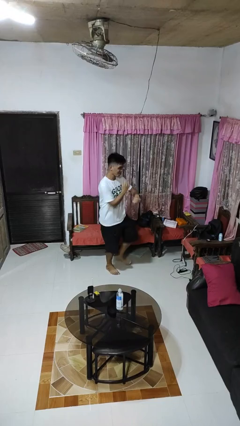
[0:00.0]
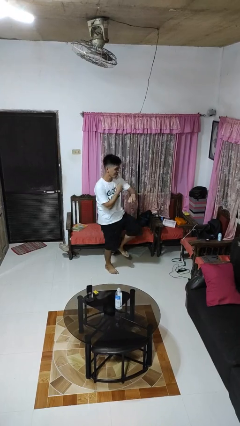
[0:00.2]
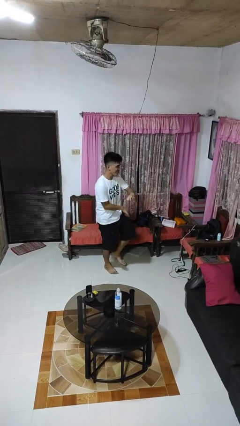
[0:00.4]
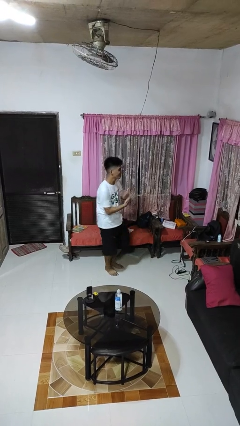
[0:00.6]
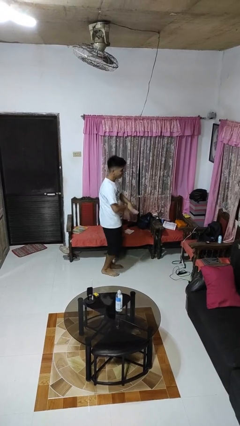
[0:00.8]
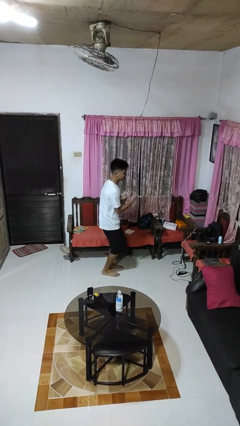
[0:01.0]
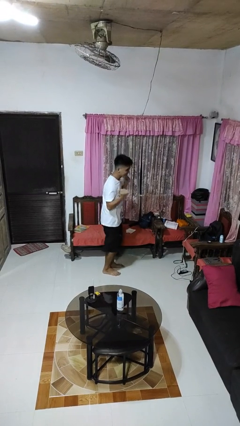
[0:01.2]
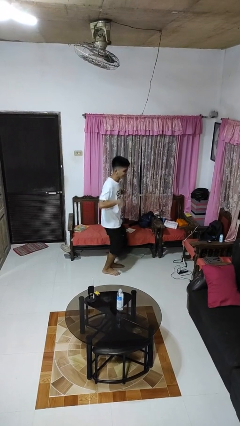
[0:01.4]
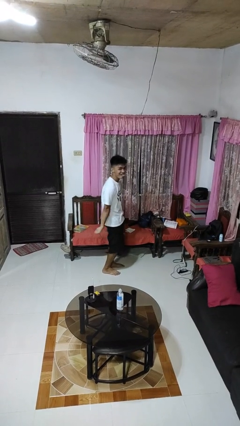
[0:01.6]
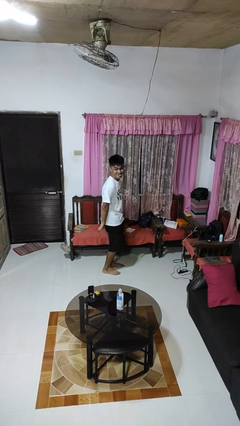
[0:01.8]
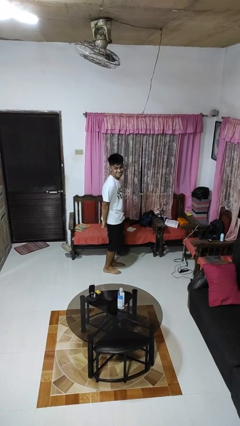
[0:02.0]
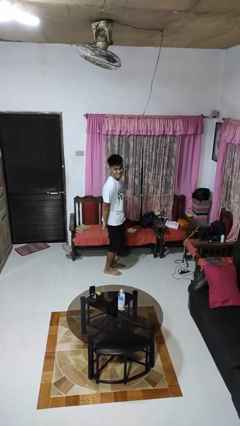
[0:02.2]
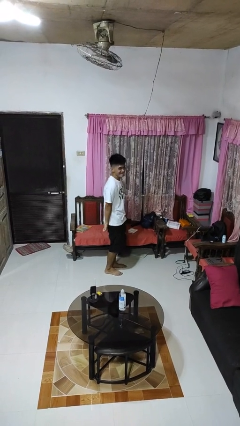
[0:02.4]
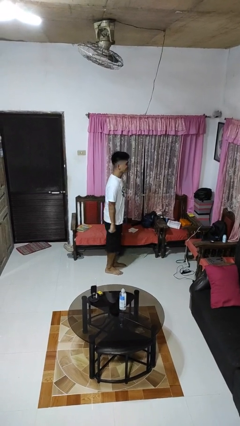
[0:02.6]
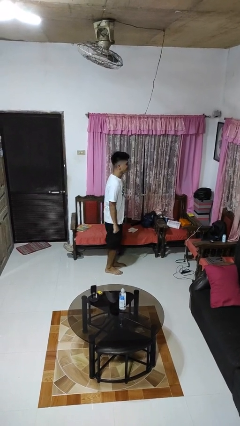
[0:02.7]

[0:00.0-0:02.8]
person dances in place

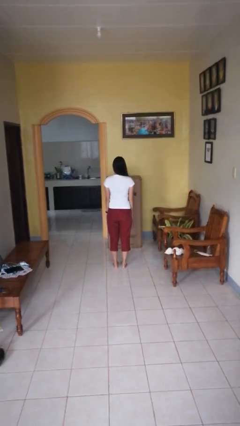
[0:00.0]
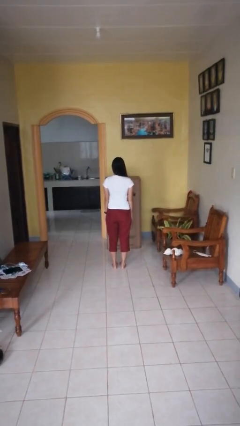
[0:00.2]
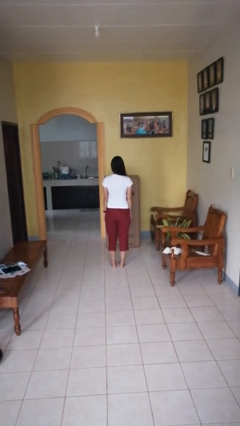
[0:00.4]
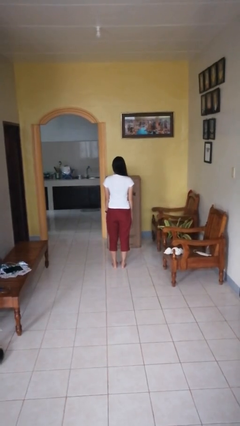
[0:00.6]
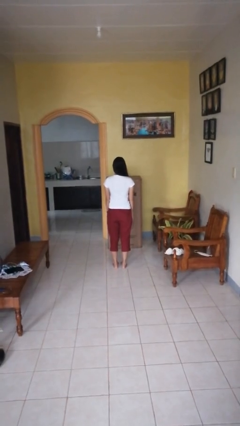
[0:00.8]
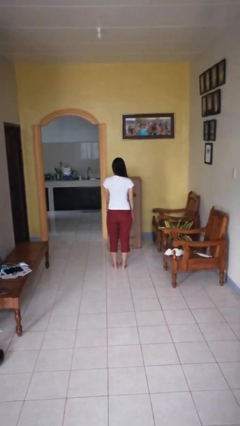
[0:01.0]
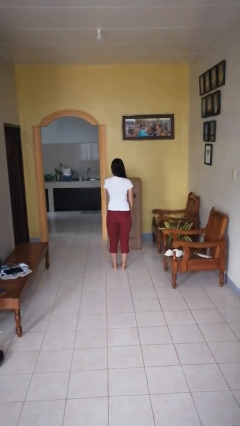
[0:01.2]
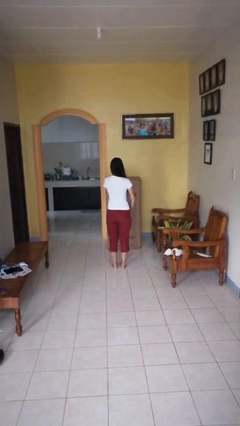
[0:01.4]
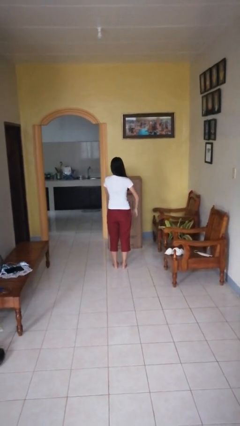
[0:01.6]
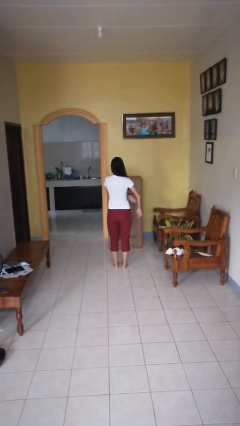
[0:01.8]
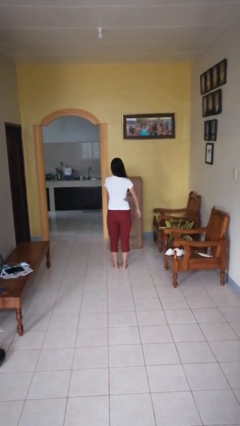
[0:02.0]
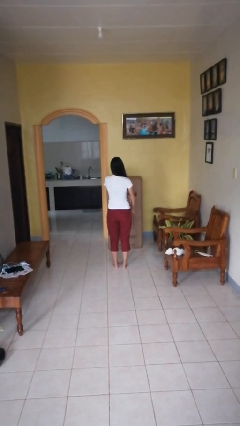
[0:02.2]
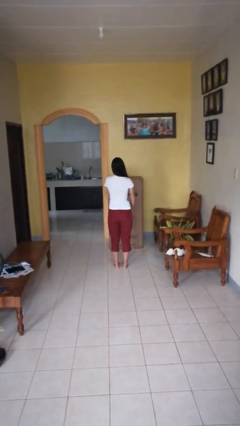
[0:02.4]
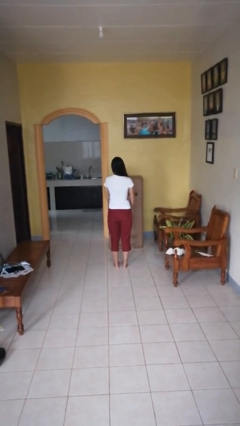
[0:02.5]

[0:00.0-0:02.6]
person swats bug

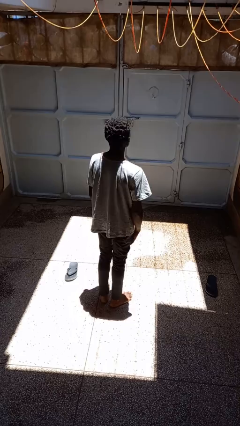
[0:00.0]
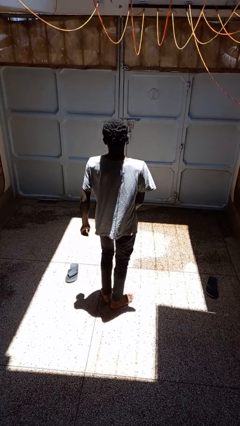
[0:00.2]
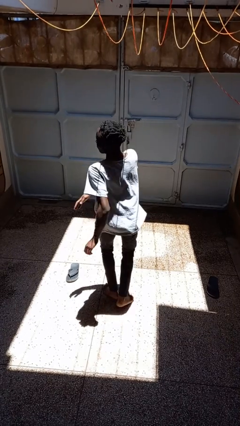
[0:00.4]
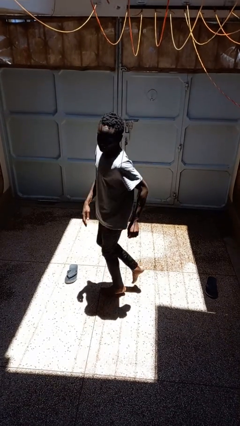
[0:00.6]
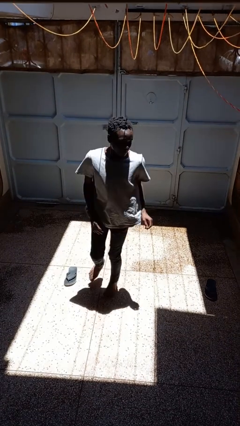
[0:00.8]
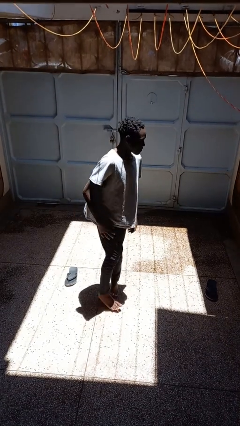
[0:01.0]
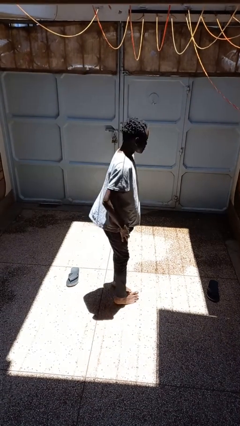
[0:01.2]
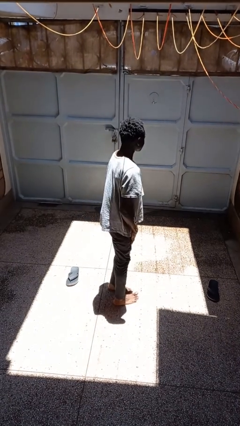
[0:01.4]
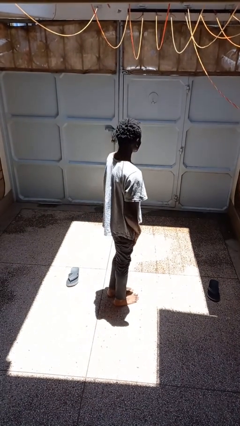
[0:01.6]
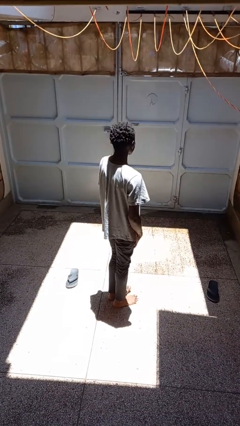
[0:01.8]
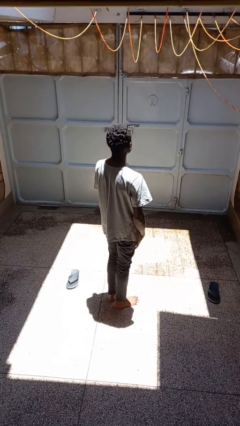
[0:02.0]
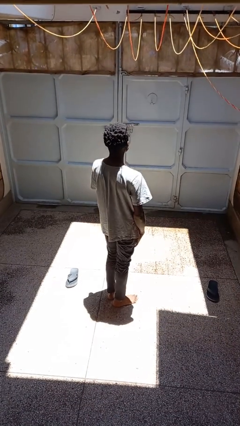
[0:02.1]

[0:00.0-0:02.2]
person twirls

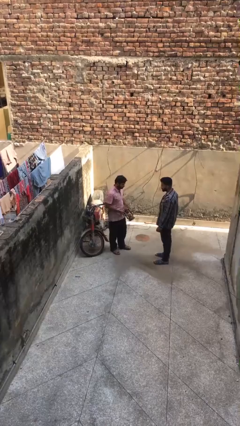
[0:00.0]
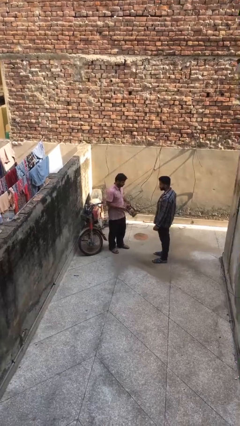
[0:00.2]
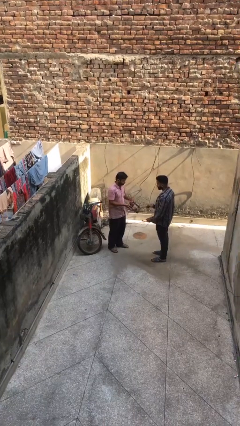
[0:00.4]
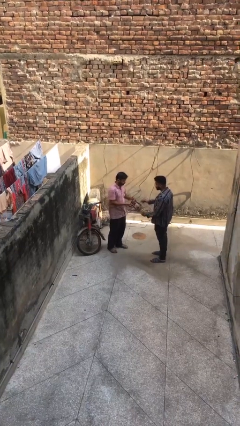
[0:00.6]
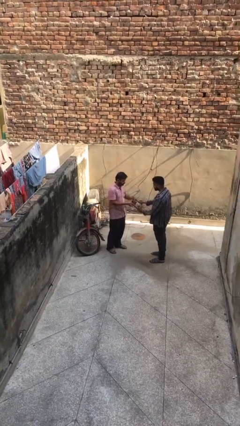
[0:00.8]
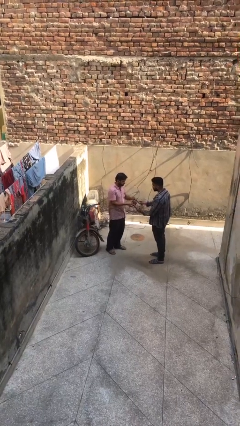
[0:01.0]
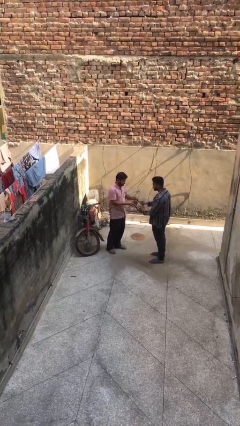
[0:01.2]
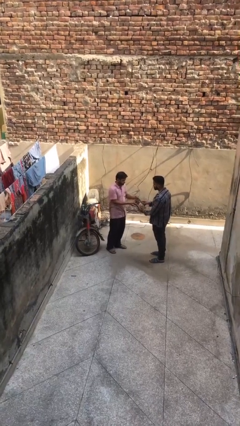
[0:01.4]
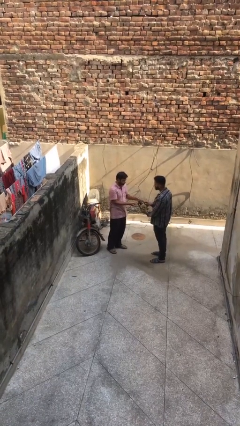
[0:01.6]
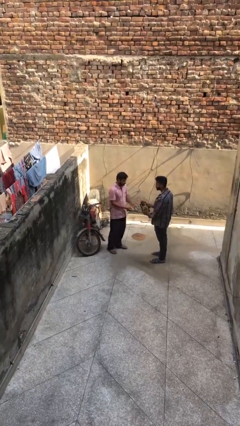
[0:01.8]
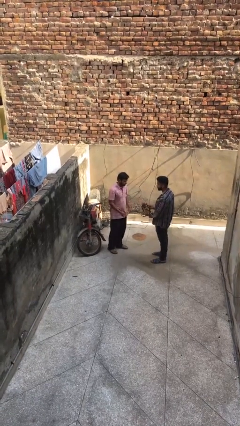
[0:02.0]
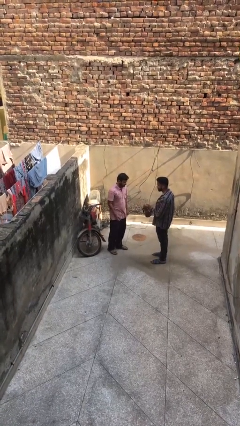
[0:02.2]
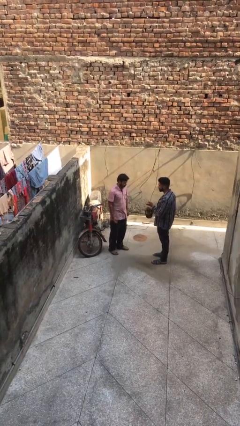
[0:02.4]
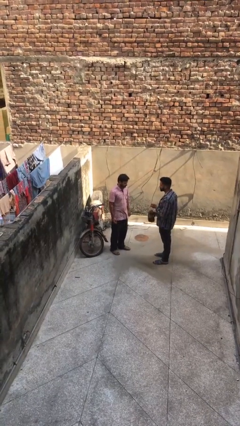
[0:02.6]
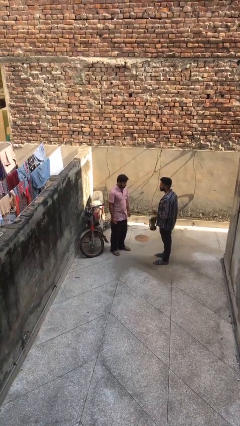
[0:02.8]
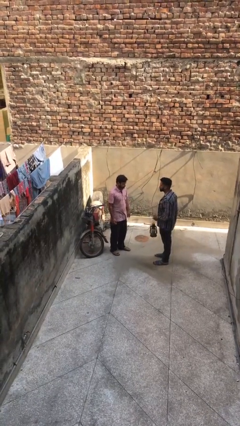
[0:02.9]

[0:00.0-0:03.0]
person transfers object to person

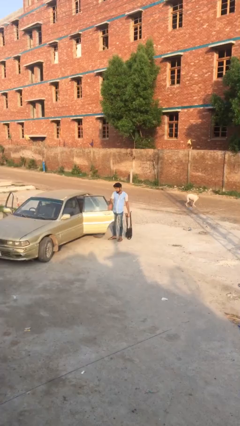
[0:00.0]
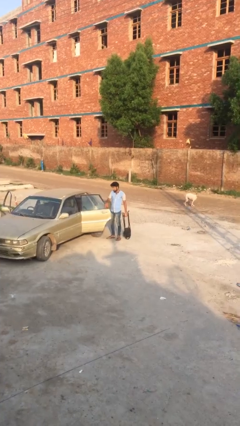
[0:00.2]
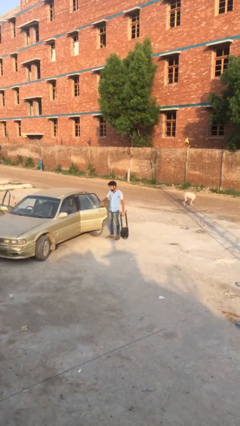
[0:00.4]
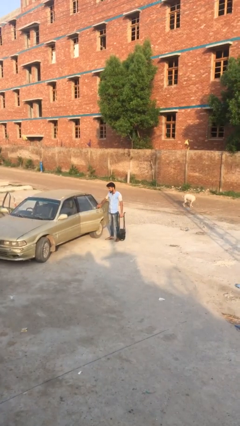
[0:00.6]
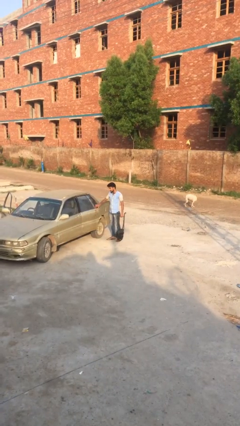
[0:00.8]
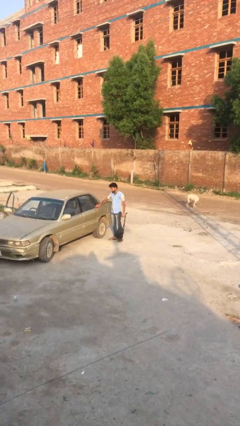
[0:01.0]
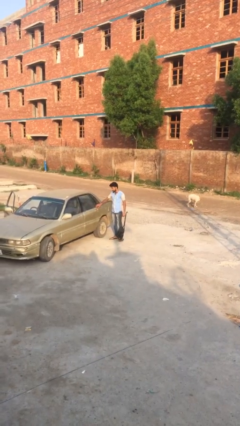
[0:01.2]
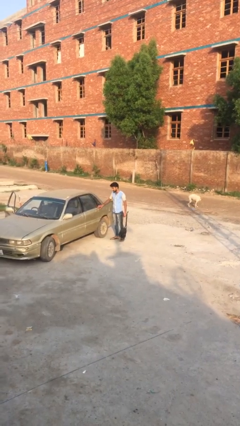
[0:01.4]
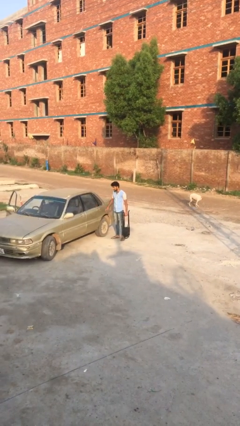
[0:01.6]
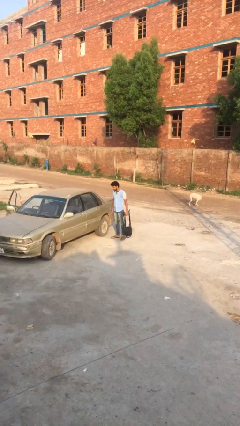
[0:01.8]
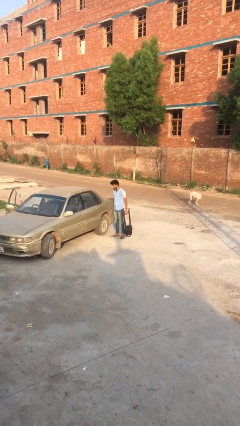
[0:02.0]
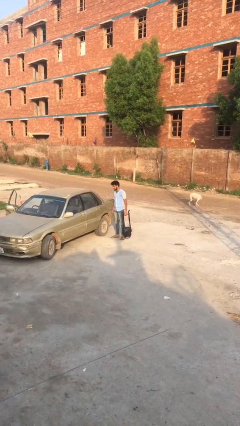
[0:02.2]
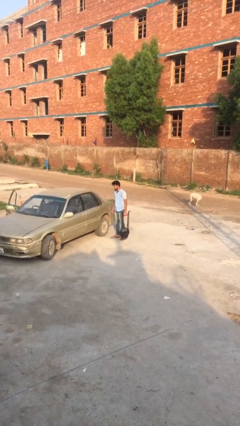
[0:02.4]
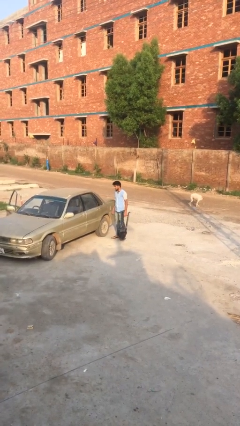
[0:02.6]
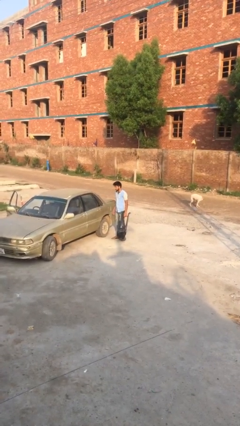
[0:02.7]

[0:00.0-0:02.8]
person closes car door

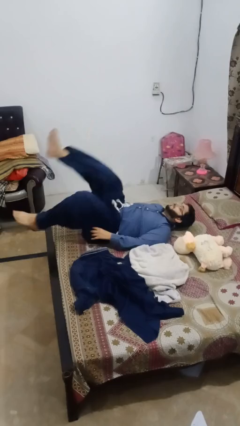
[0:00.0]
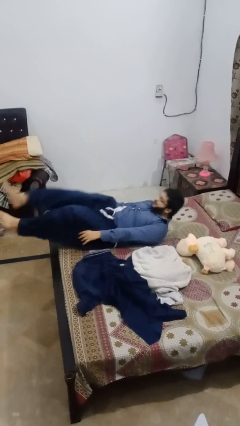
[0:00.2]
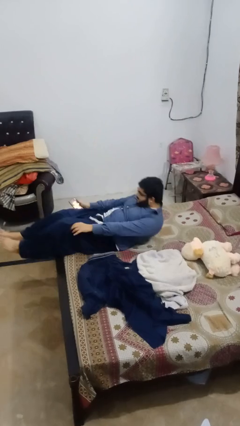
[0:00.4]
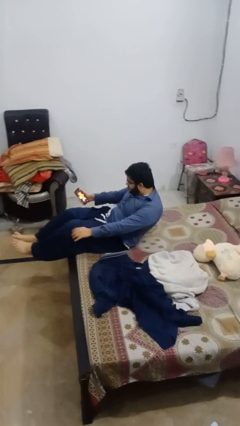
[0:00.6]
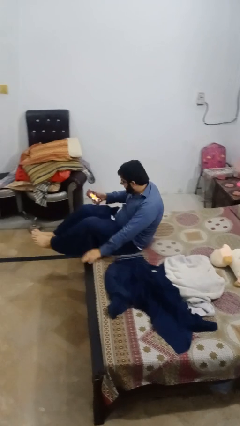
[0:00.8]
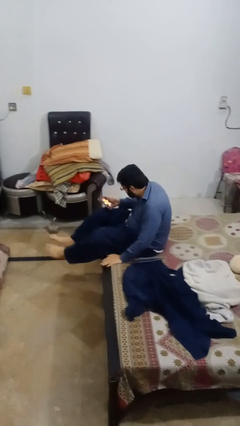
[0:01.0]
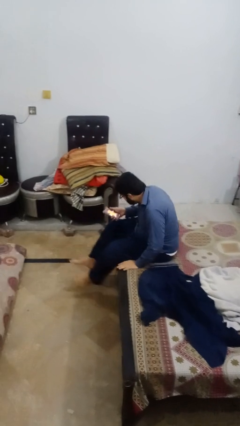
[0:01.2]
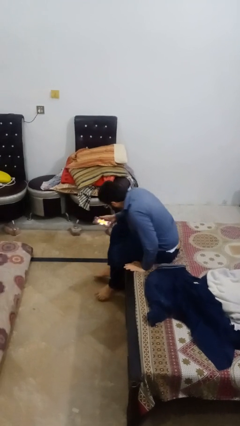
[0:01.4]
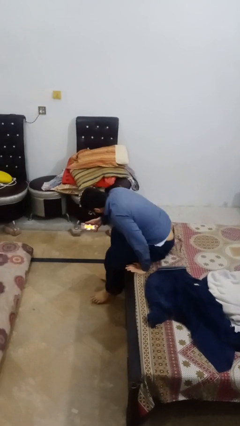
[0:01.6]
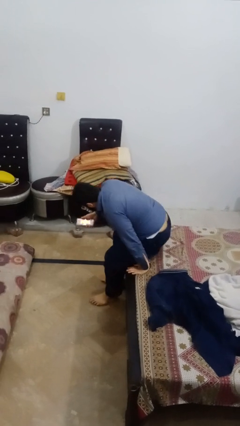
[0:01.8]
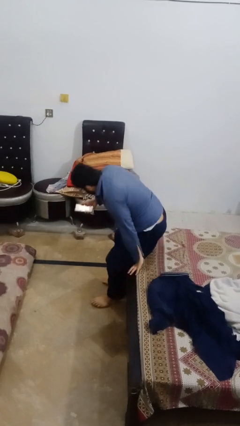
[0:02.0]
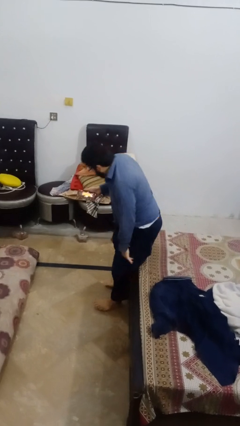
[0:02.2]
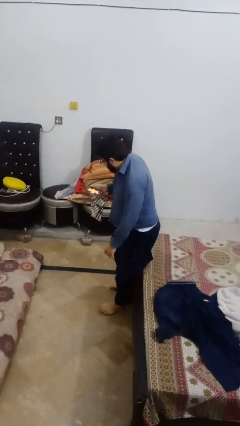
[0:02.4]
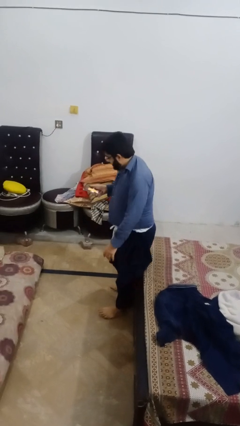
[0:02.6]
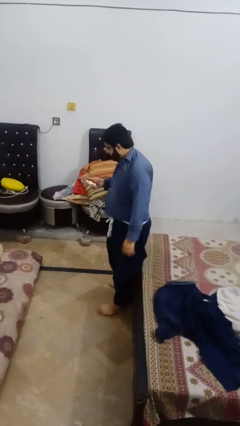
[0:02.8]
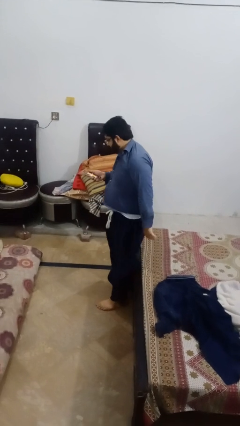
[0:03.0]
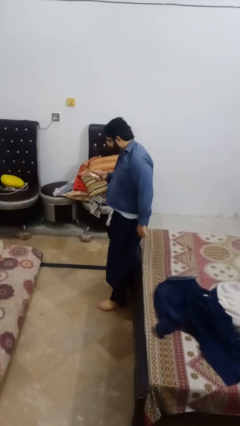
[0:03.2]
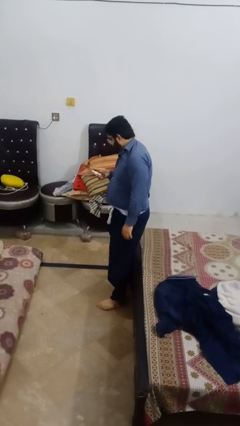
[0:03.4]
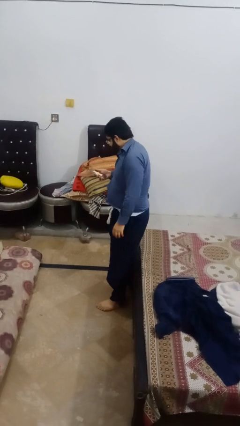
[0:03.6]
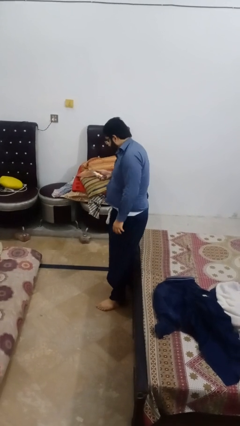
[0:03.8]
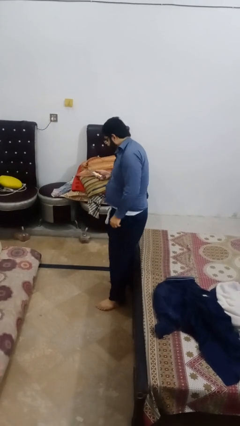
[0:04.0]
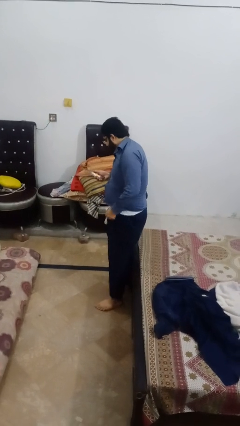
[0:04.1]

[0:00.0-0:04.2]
person stands up
